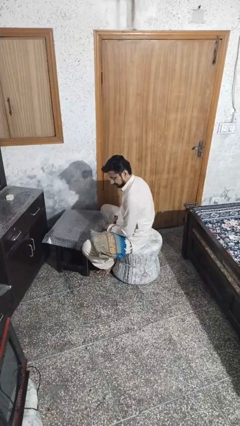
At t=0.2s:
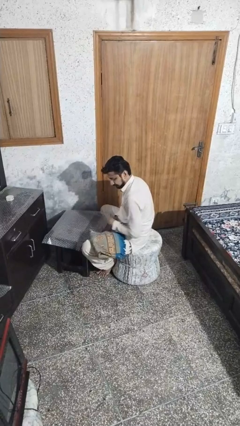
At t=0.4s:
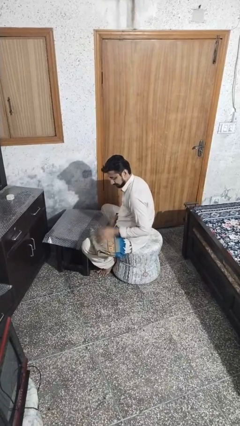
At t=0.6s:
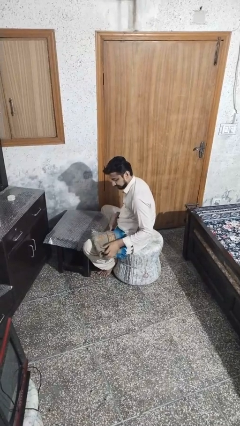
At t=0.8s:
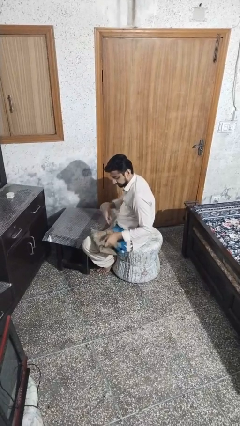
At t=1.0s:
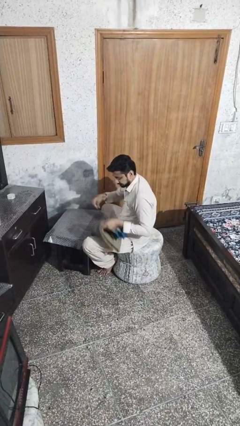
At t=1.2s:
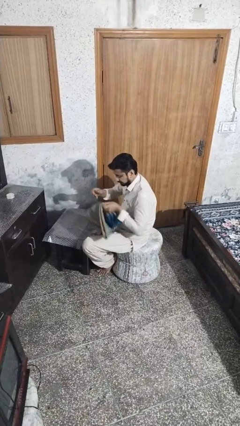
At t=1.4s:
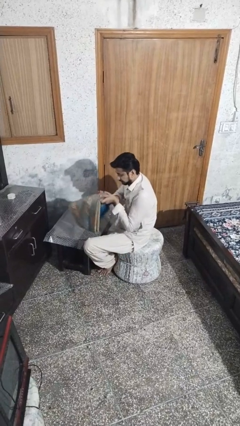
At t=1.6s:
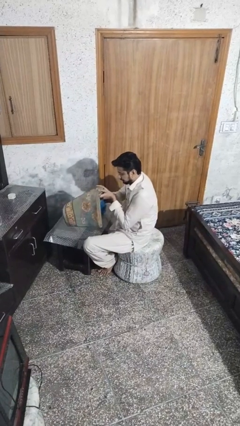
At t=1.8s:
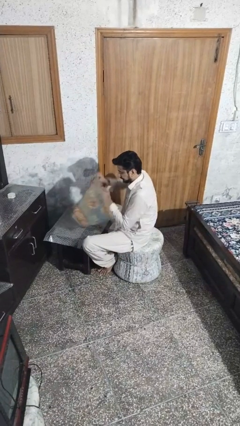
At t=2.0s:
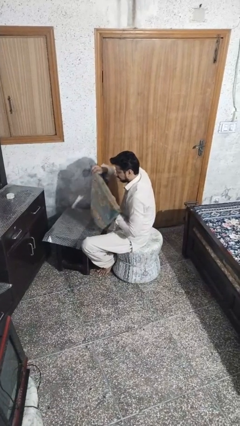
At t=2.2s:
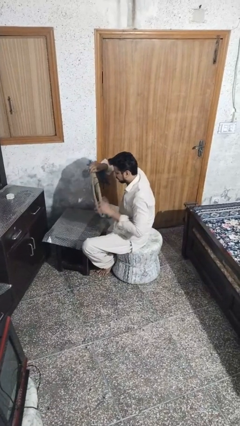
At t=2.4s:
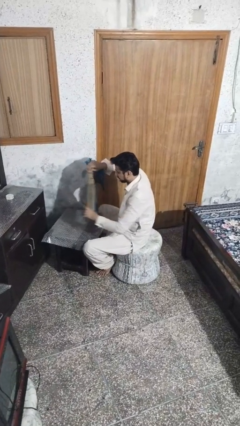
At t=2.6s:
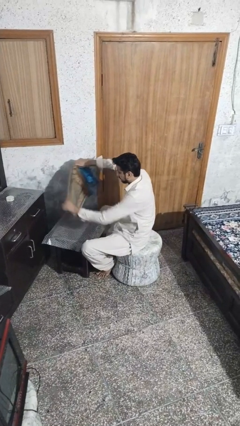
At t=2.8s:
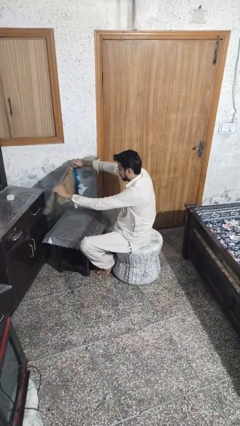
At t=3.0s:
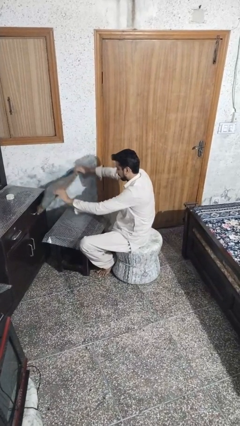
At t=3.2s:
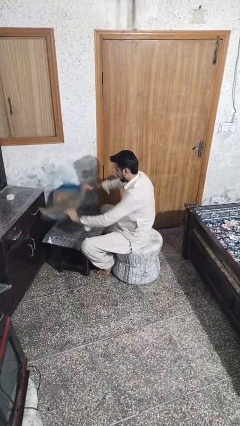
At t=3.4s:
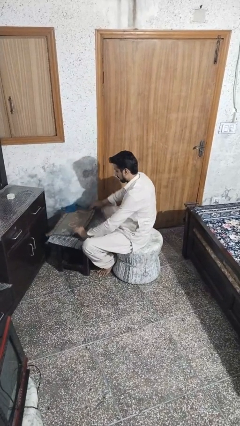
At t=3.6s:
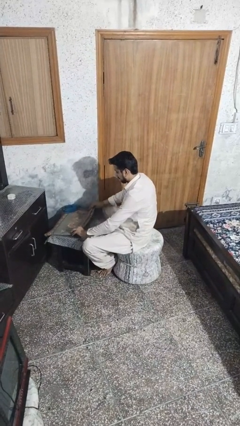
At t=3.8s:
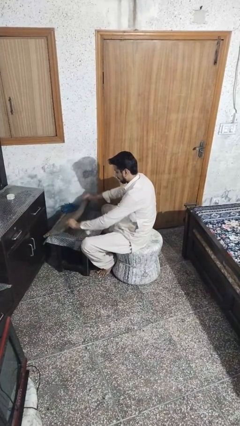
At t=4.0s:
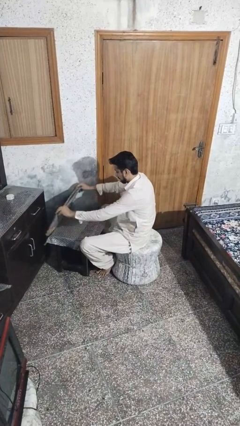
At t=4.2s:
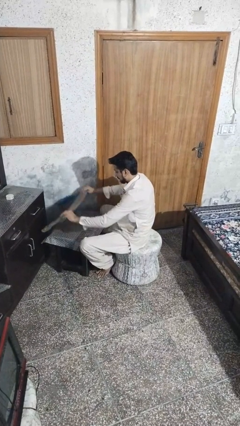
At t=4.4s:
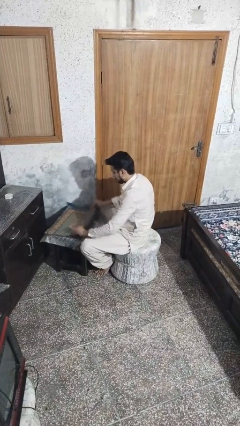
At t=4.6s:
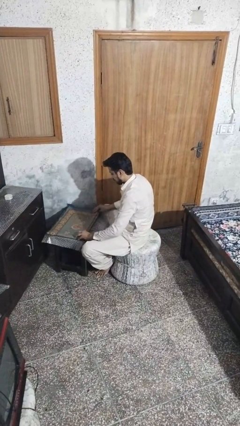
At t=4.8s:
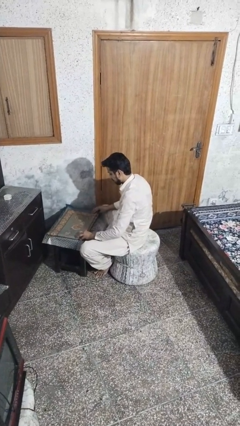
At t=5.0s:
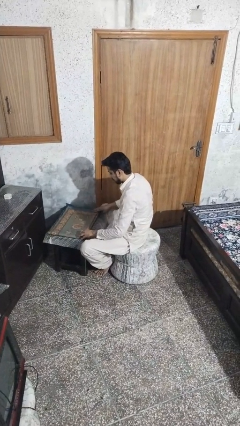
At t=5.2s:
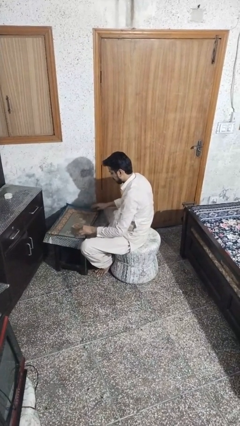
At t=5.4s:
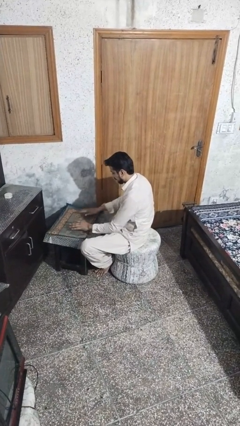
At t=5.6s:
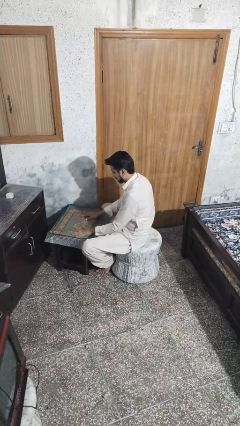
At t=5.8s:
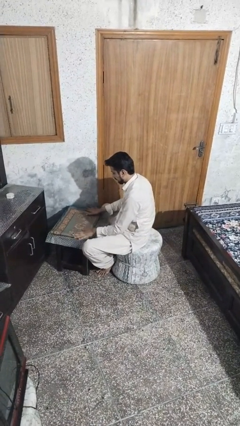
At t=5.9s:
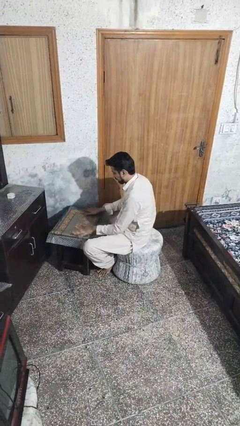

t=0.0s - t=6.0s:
person spreads tablecloth

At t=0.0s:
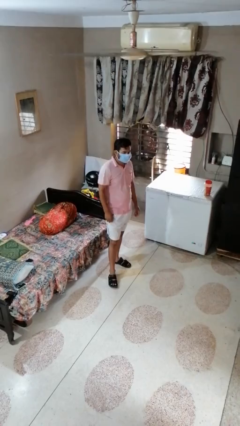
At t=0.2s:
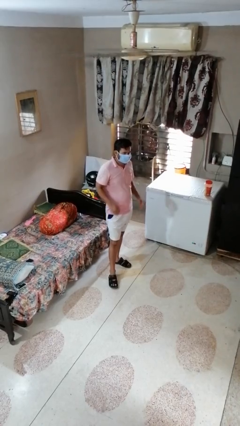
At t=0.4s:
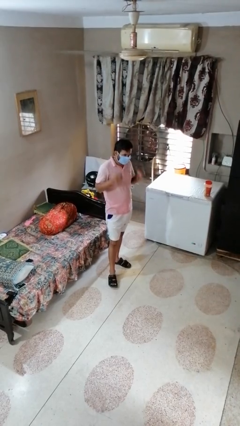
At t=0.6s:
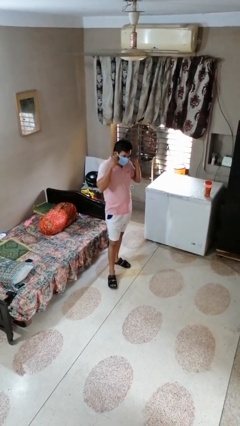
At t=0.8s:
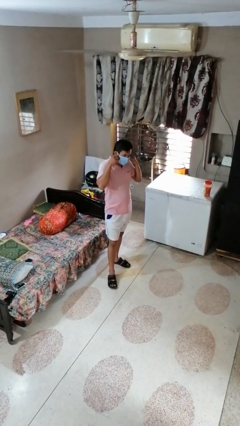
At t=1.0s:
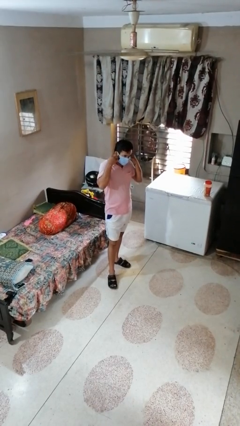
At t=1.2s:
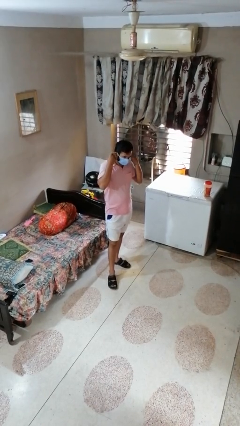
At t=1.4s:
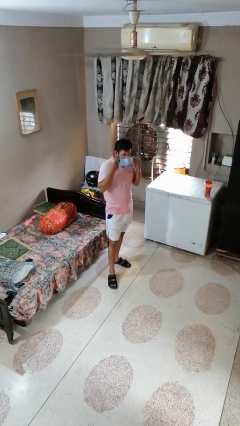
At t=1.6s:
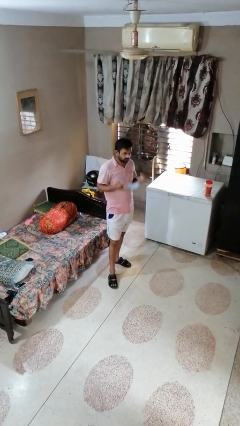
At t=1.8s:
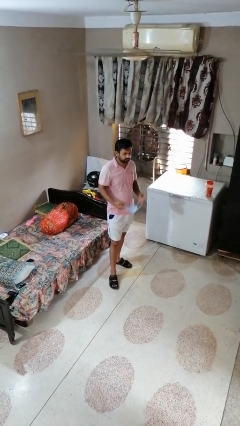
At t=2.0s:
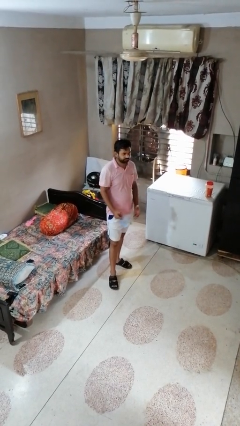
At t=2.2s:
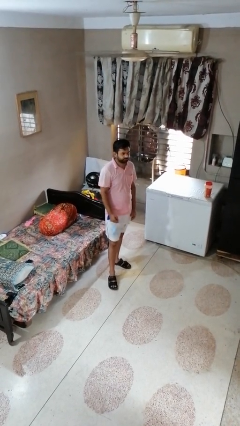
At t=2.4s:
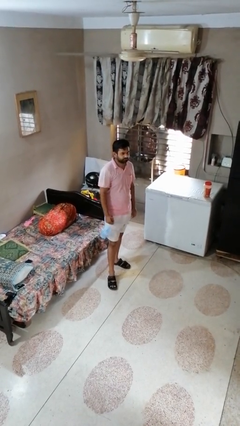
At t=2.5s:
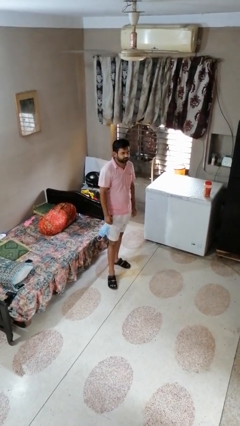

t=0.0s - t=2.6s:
person takes off facemask

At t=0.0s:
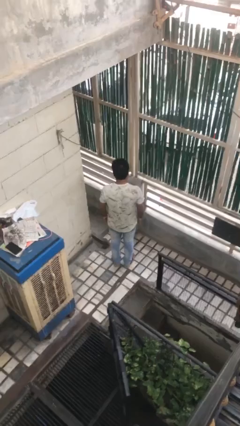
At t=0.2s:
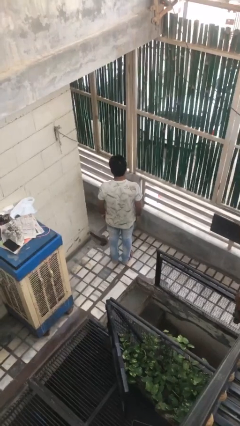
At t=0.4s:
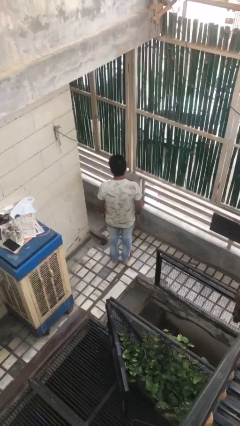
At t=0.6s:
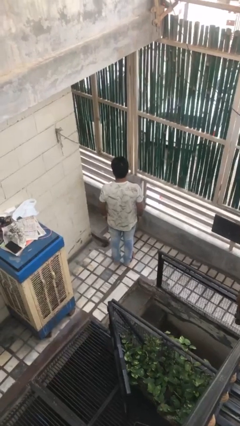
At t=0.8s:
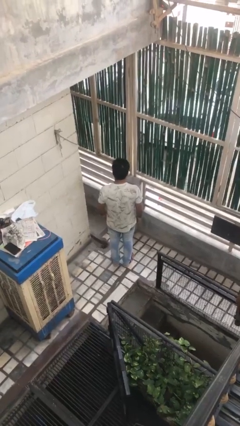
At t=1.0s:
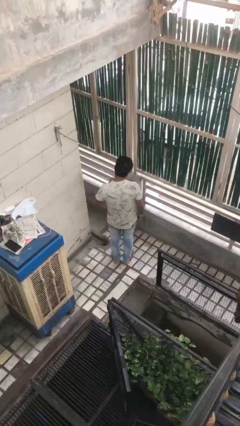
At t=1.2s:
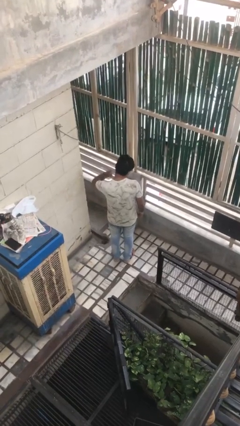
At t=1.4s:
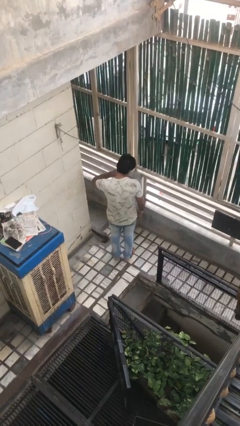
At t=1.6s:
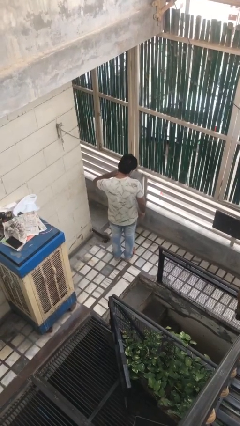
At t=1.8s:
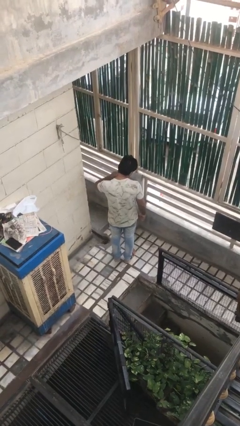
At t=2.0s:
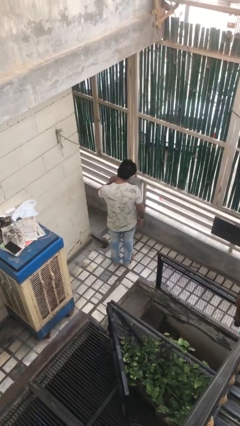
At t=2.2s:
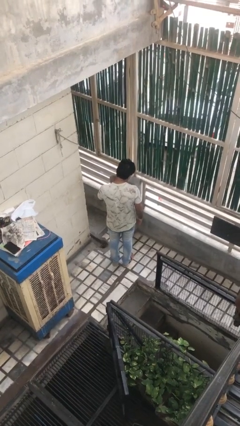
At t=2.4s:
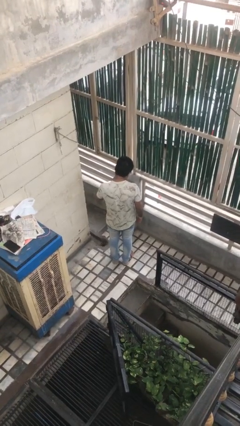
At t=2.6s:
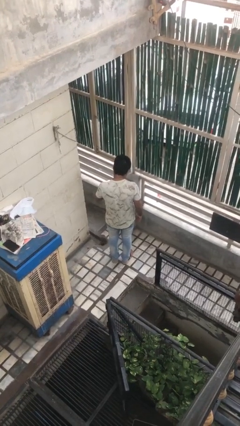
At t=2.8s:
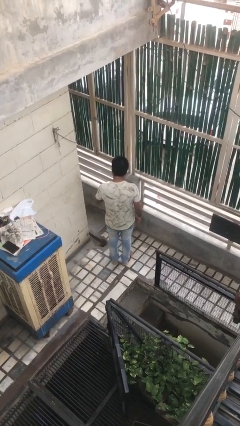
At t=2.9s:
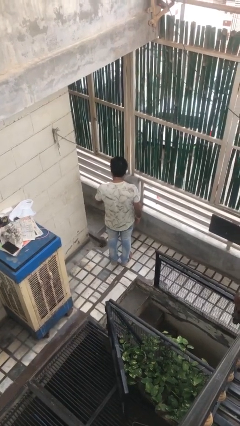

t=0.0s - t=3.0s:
person swats bug

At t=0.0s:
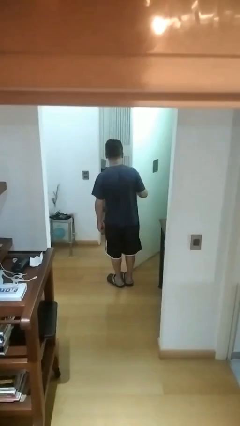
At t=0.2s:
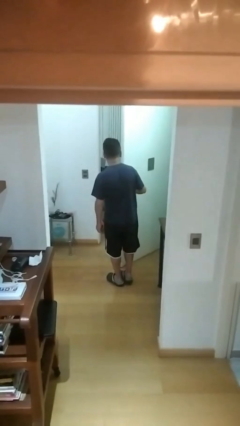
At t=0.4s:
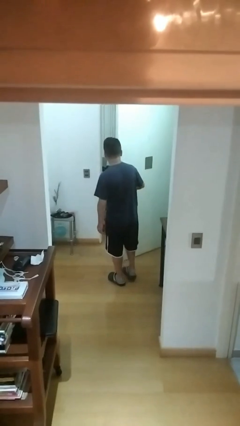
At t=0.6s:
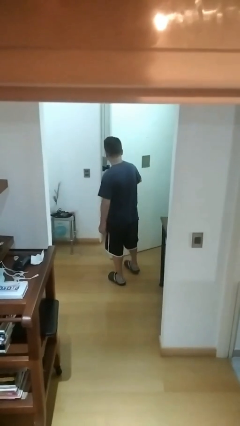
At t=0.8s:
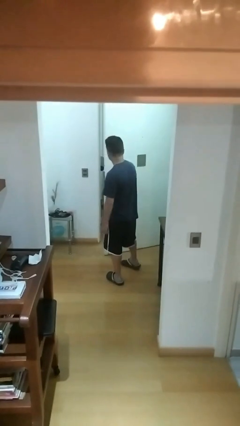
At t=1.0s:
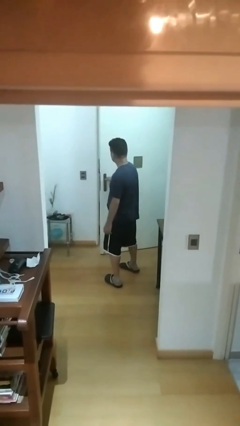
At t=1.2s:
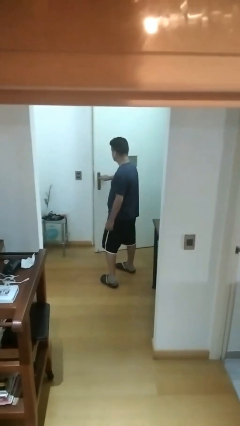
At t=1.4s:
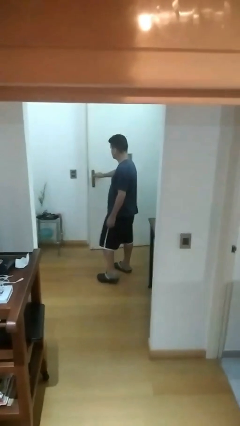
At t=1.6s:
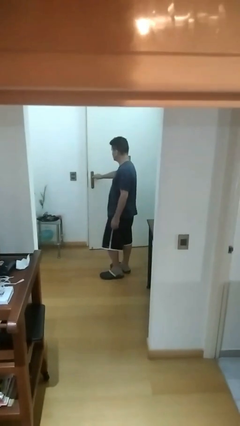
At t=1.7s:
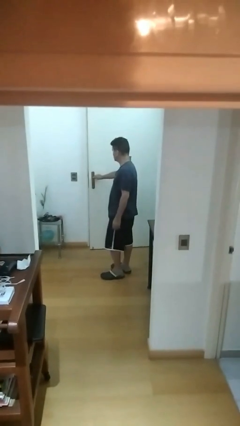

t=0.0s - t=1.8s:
person closes facility door

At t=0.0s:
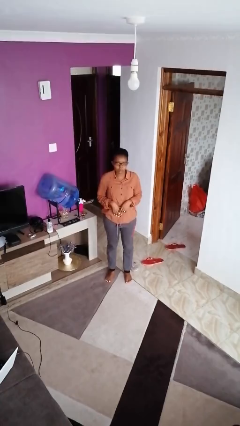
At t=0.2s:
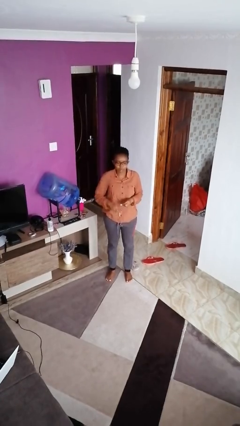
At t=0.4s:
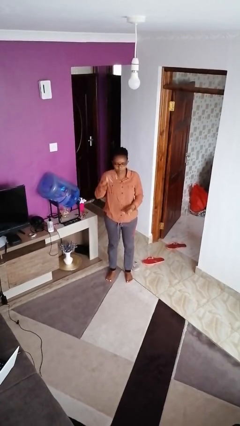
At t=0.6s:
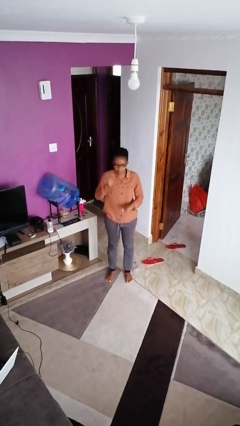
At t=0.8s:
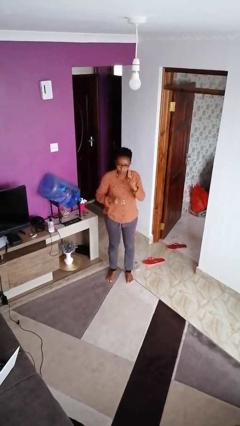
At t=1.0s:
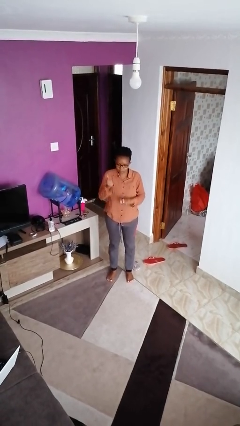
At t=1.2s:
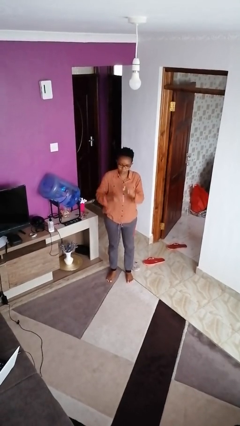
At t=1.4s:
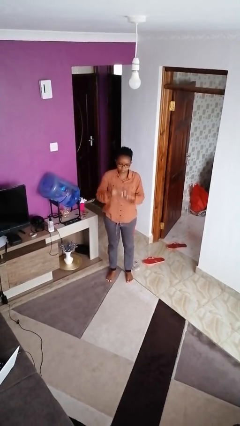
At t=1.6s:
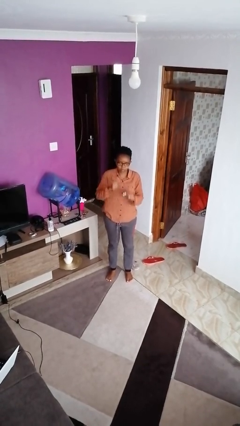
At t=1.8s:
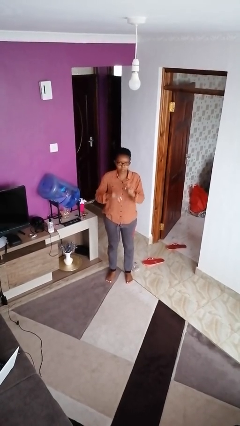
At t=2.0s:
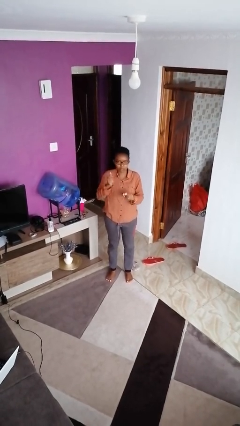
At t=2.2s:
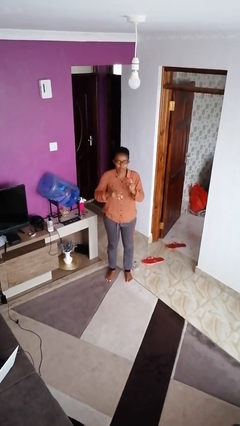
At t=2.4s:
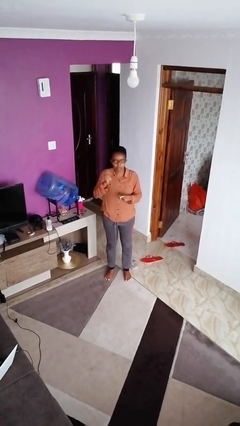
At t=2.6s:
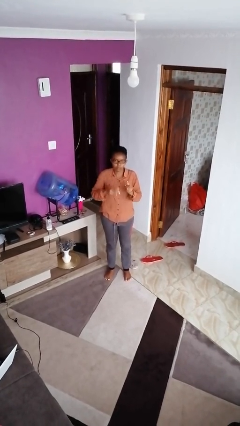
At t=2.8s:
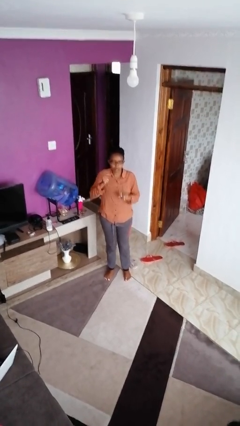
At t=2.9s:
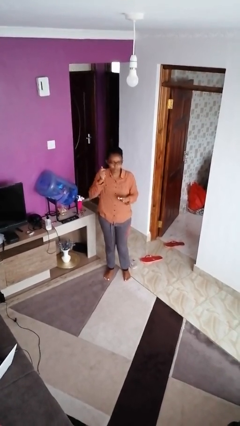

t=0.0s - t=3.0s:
person snaps fingers

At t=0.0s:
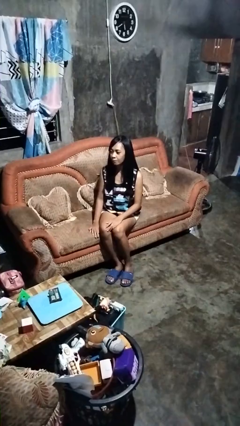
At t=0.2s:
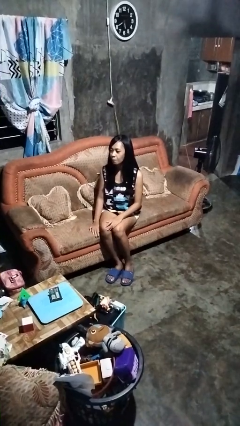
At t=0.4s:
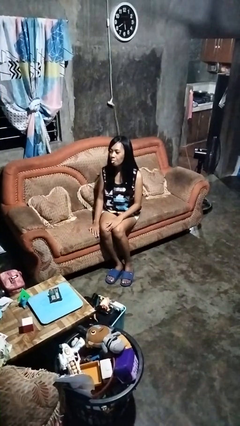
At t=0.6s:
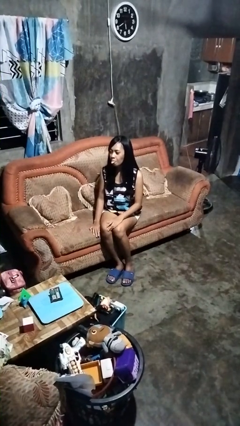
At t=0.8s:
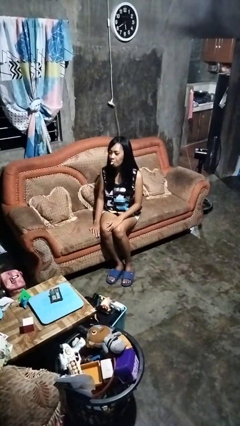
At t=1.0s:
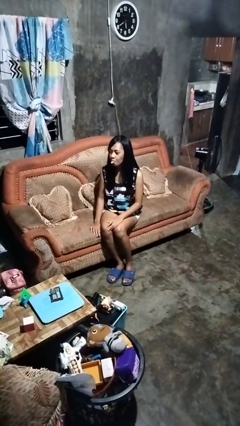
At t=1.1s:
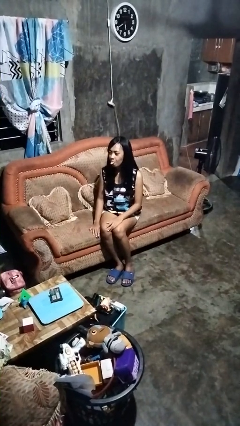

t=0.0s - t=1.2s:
person sticks out tongue
